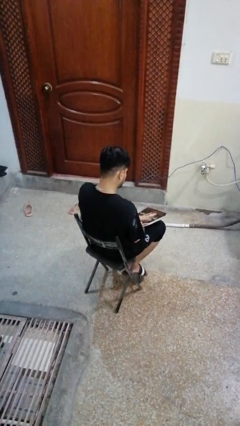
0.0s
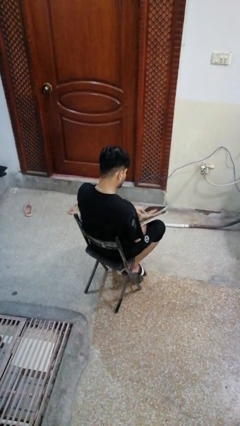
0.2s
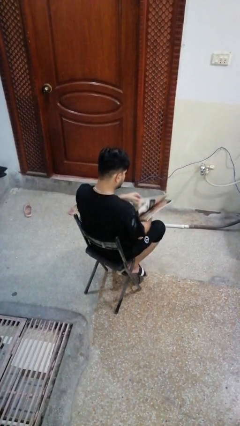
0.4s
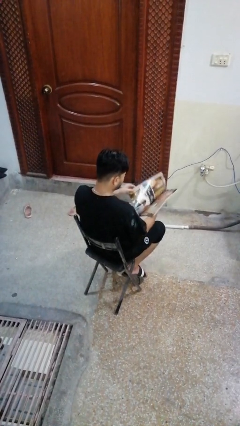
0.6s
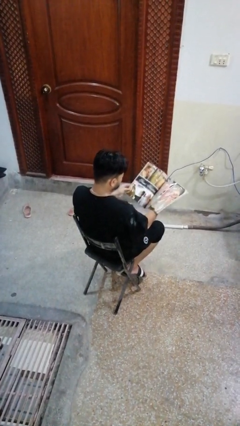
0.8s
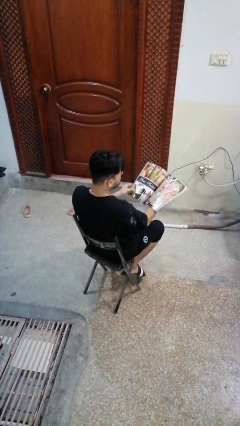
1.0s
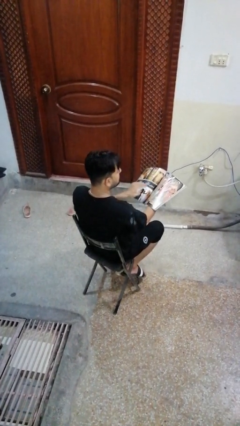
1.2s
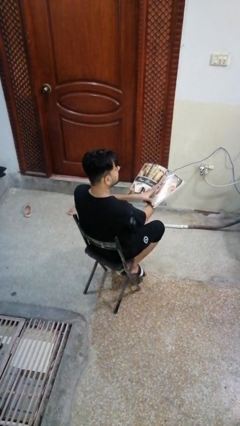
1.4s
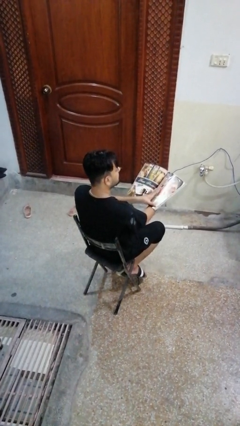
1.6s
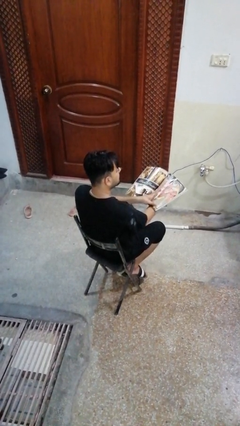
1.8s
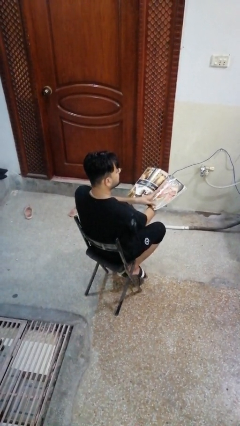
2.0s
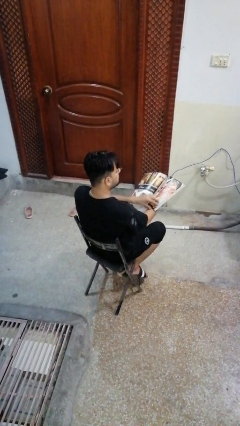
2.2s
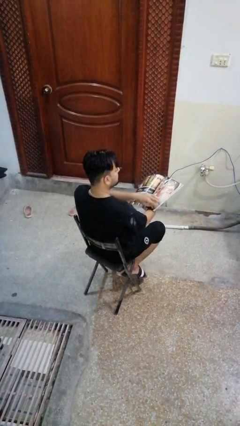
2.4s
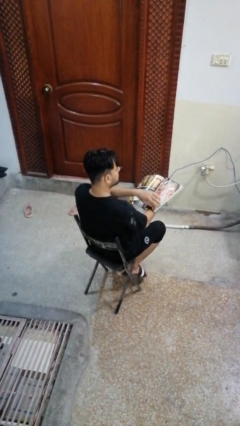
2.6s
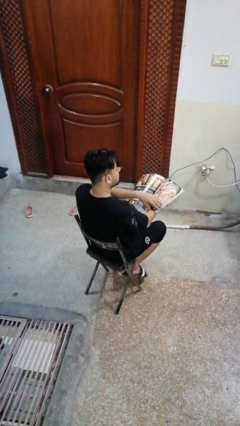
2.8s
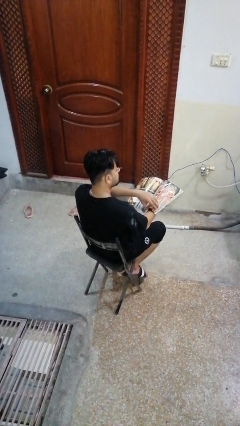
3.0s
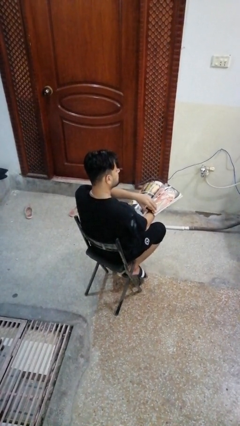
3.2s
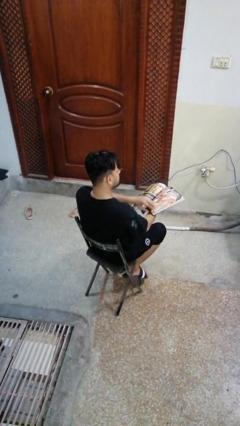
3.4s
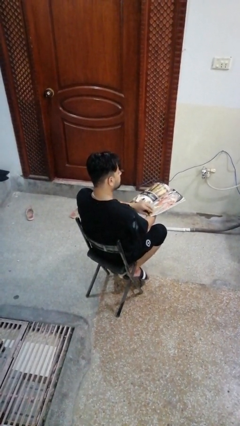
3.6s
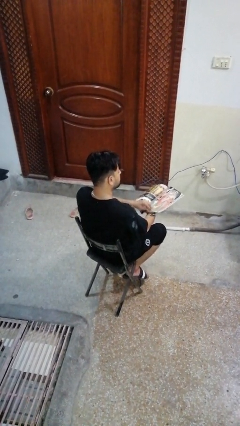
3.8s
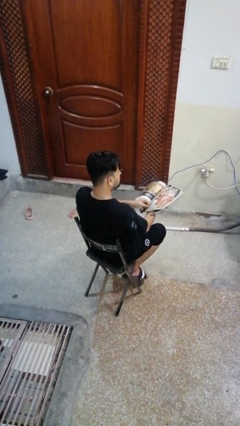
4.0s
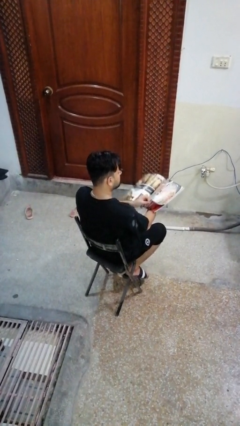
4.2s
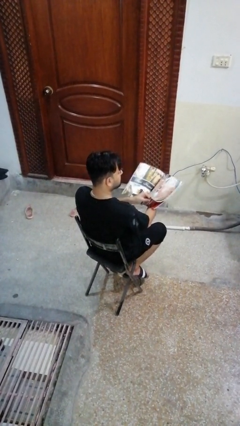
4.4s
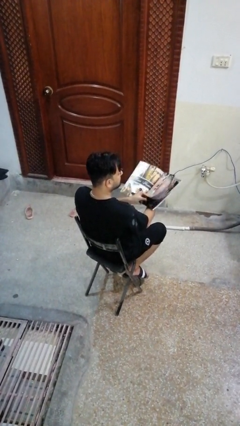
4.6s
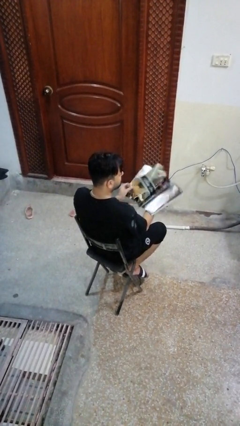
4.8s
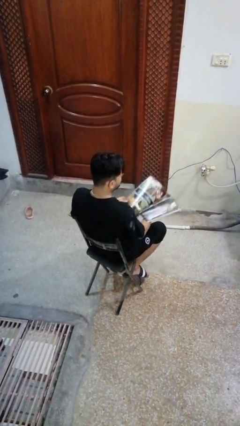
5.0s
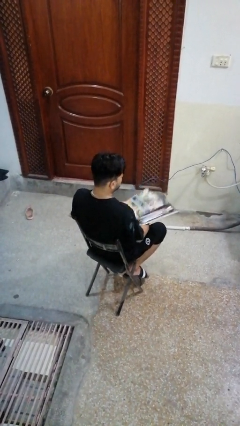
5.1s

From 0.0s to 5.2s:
person reads magazine

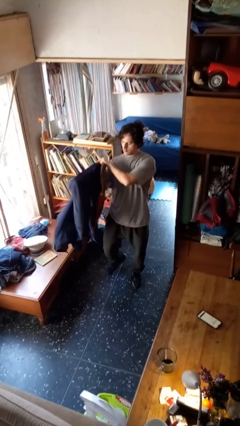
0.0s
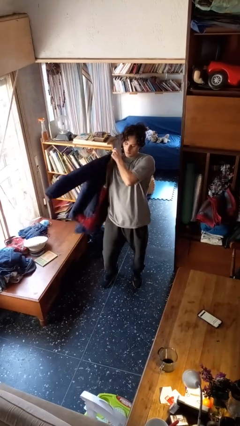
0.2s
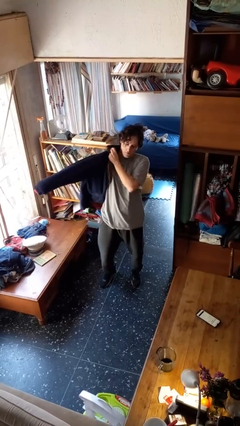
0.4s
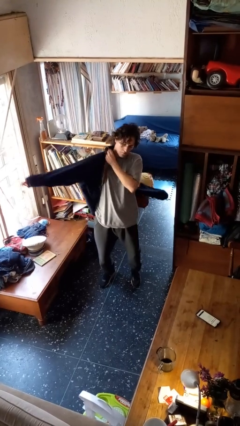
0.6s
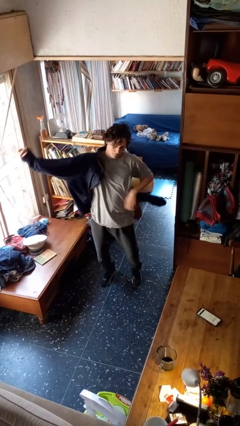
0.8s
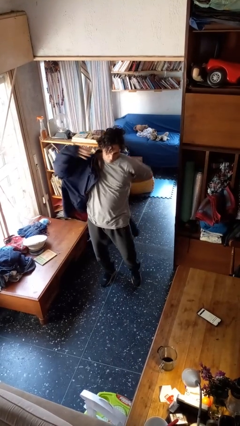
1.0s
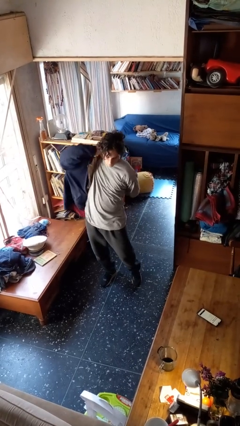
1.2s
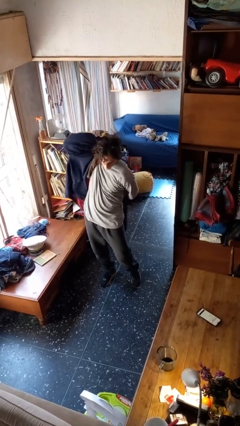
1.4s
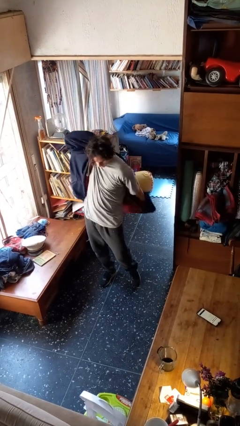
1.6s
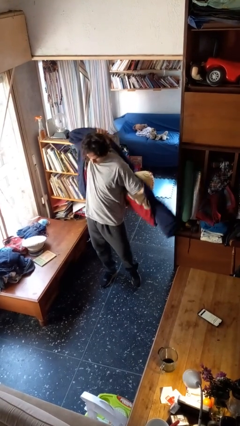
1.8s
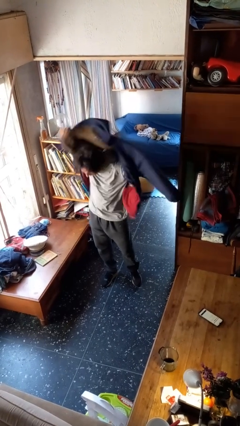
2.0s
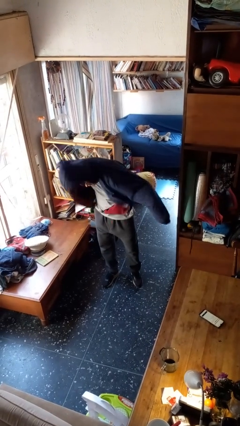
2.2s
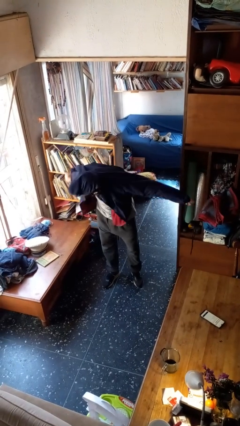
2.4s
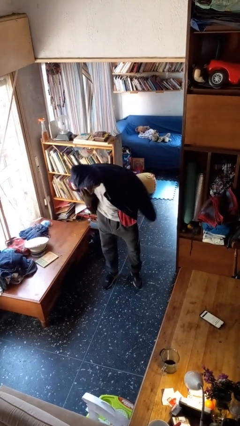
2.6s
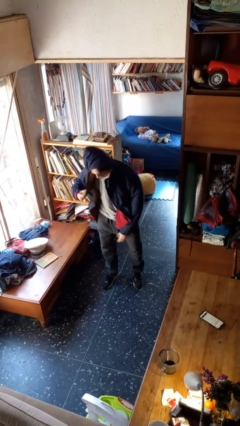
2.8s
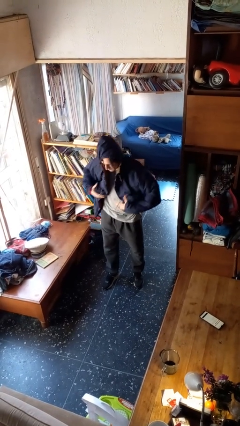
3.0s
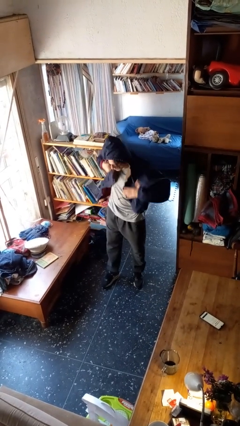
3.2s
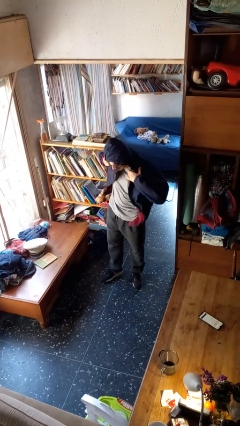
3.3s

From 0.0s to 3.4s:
person puts on hoodie

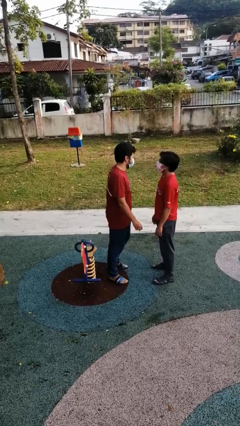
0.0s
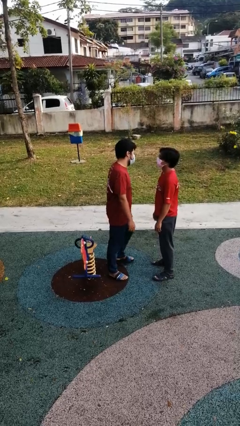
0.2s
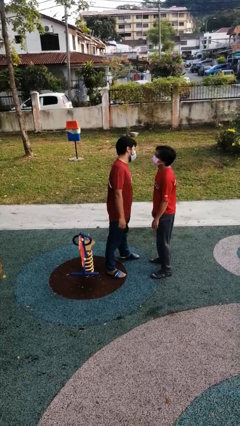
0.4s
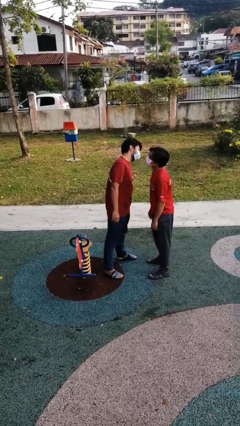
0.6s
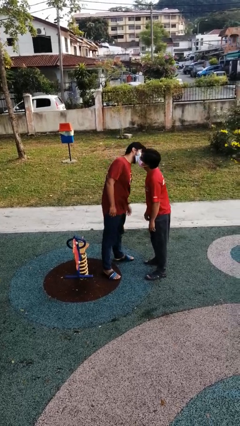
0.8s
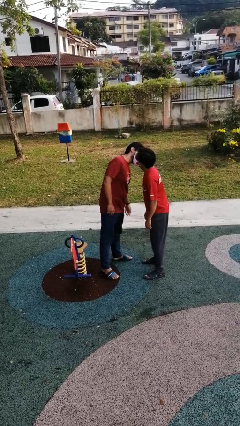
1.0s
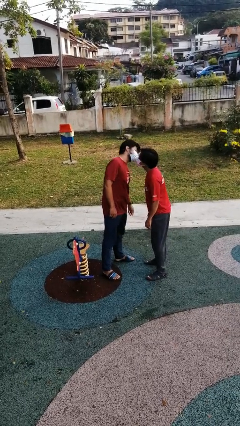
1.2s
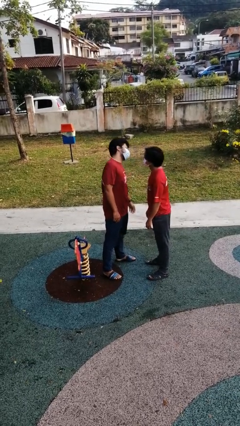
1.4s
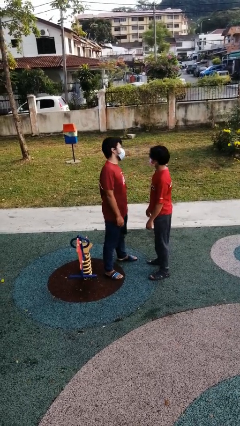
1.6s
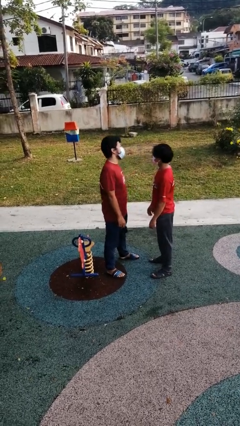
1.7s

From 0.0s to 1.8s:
person kisses cheek of person

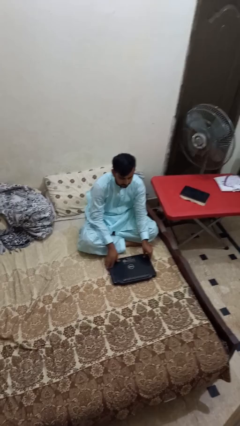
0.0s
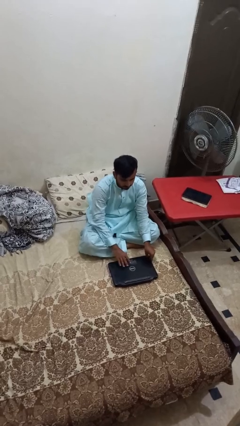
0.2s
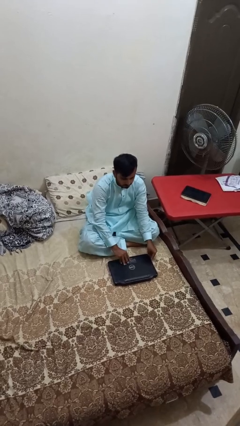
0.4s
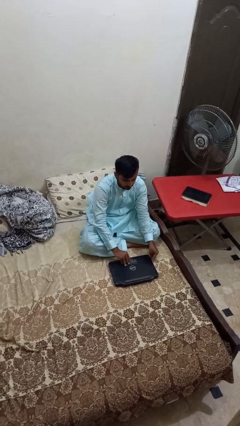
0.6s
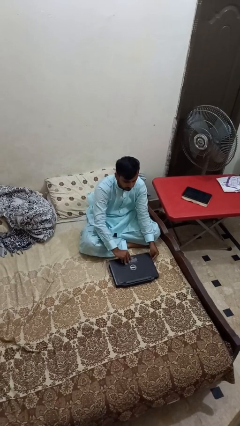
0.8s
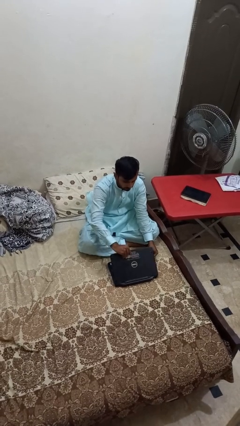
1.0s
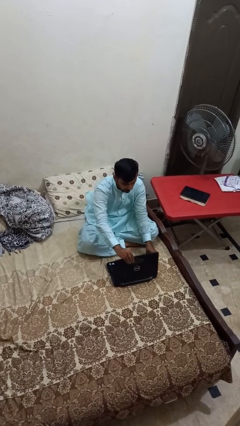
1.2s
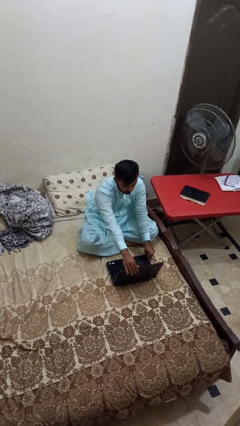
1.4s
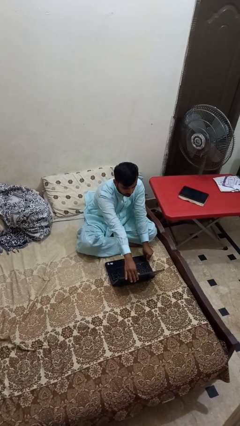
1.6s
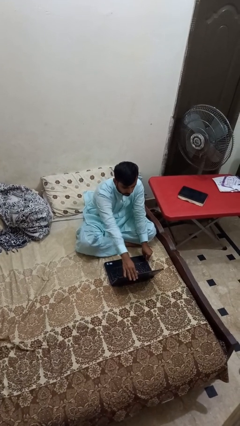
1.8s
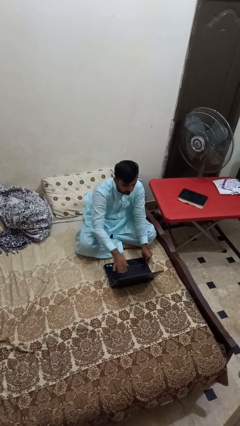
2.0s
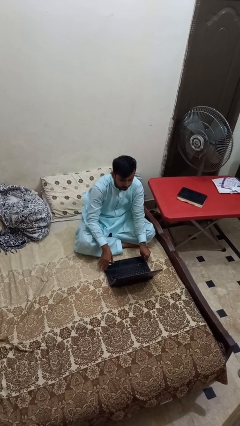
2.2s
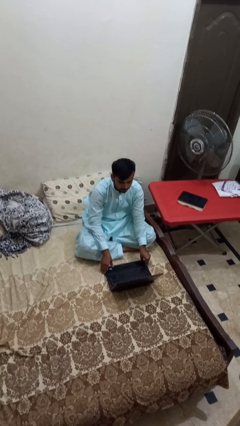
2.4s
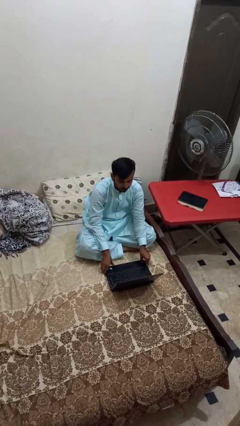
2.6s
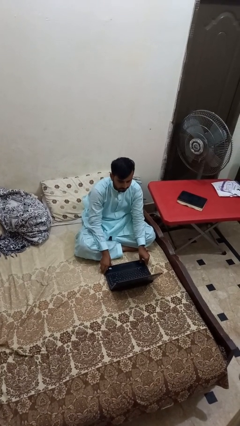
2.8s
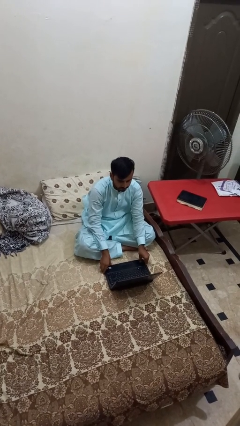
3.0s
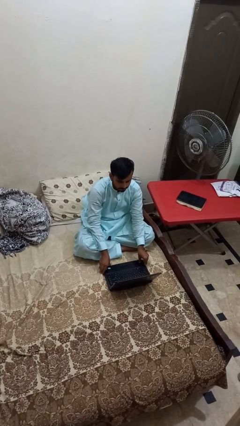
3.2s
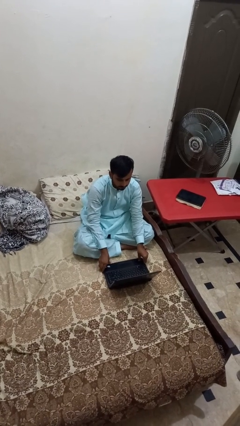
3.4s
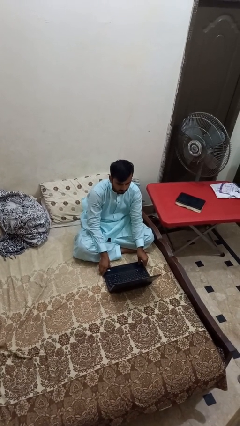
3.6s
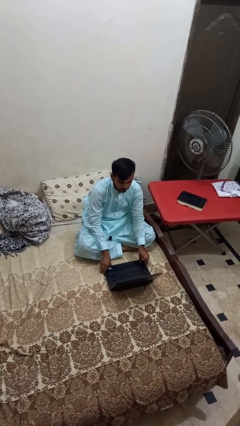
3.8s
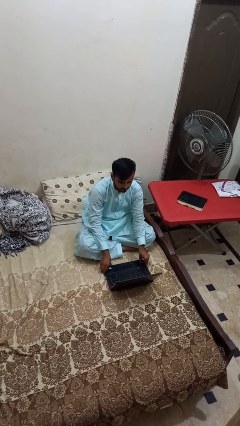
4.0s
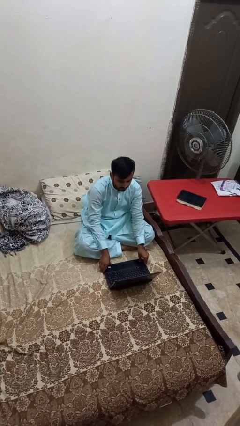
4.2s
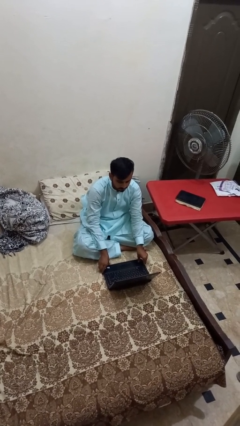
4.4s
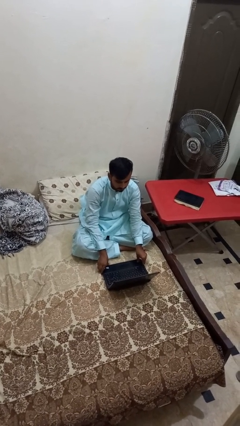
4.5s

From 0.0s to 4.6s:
person opens laptop

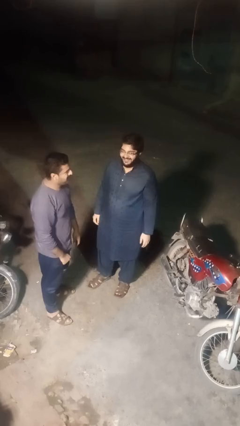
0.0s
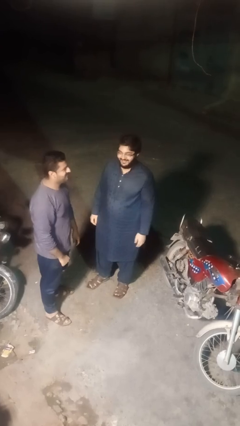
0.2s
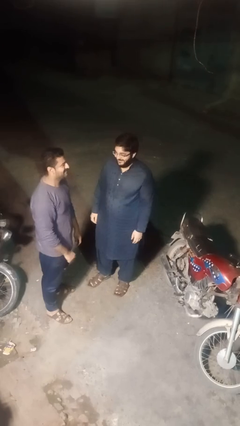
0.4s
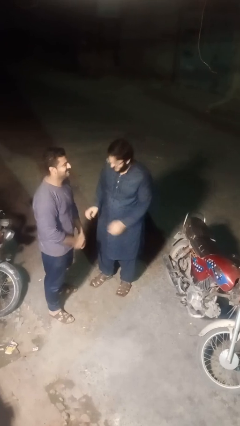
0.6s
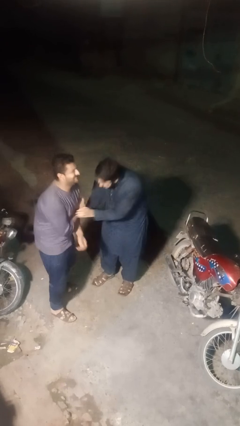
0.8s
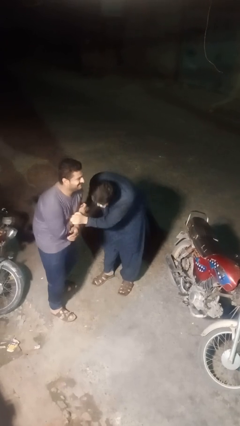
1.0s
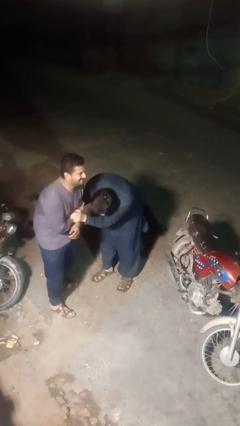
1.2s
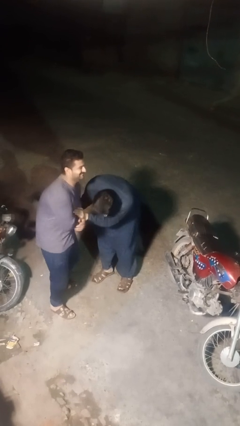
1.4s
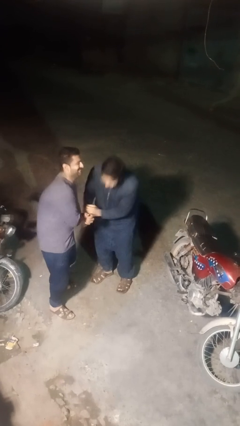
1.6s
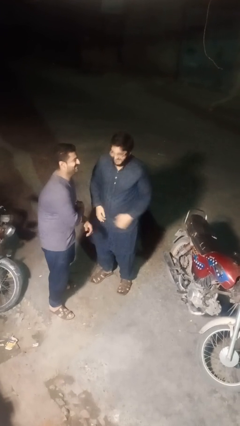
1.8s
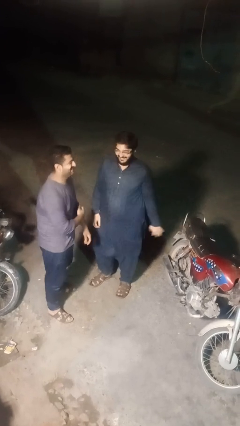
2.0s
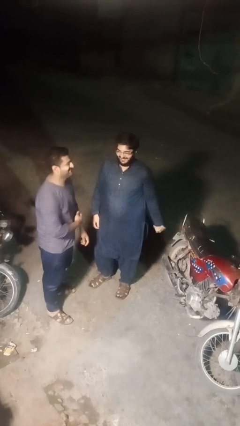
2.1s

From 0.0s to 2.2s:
person tickles person

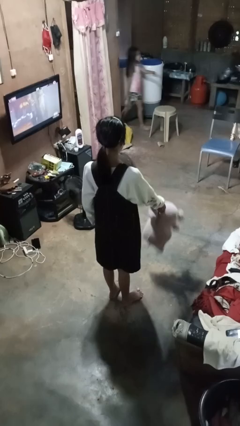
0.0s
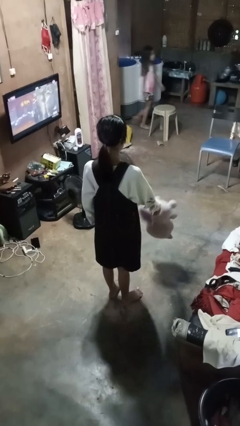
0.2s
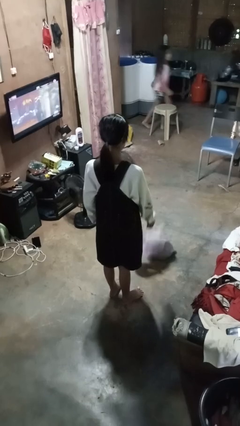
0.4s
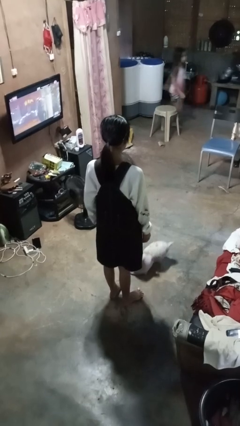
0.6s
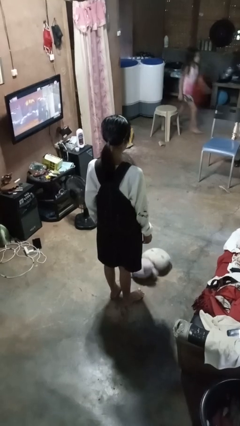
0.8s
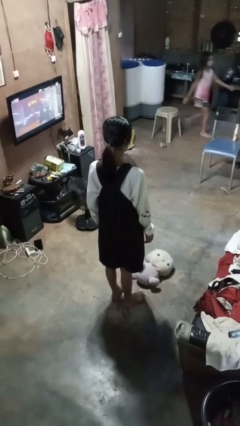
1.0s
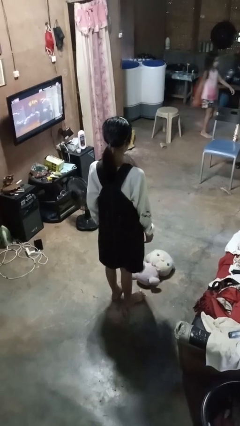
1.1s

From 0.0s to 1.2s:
person throws object to ground
